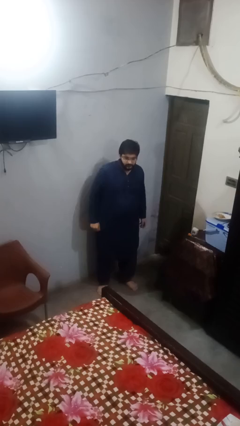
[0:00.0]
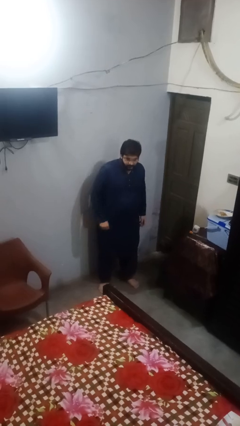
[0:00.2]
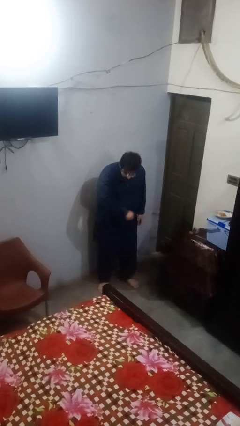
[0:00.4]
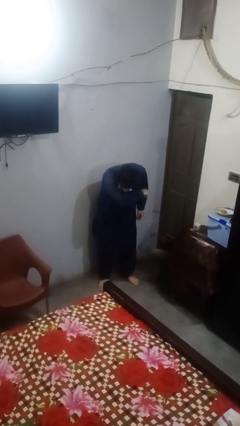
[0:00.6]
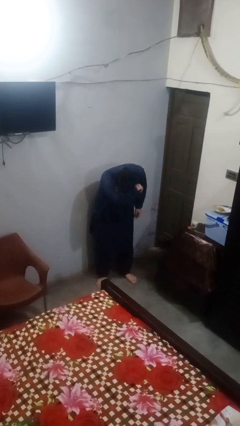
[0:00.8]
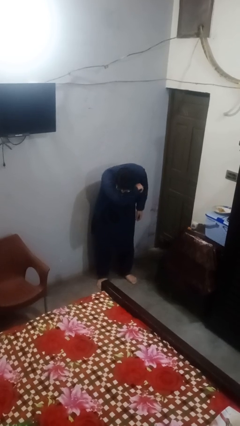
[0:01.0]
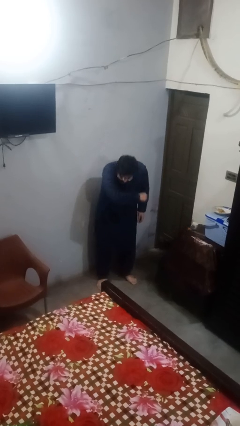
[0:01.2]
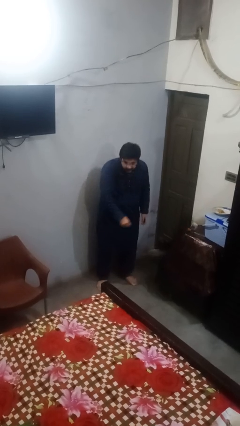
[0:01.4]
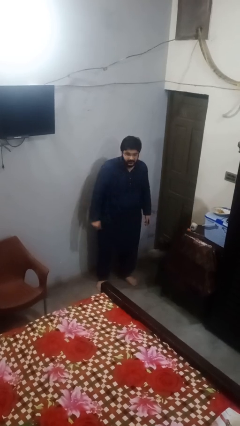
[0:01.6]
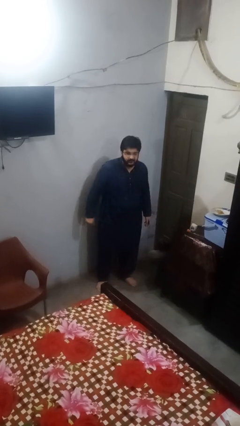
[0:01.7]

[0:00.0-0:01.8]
person sneezes into arm

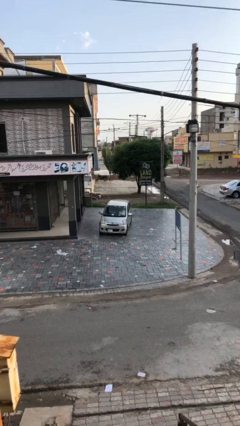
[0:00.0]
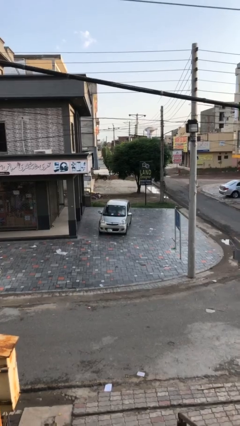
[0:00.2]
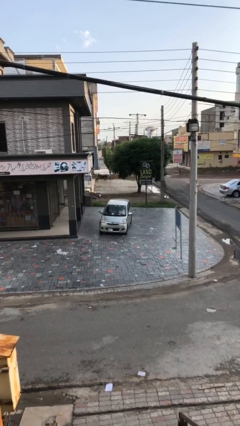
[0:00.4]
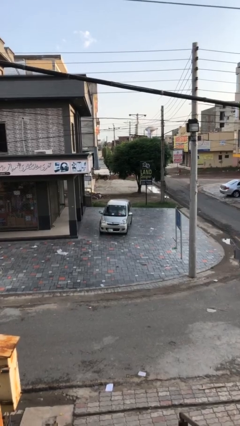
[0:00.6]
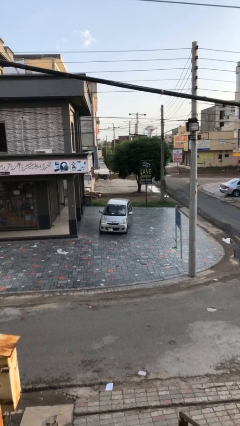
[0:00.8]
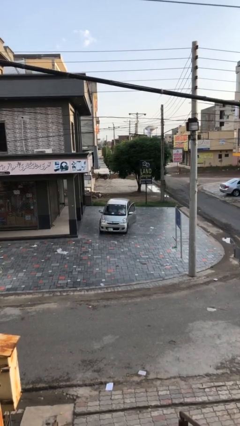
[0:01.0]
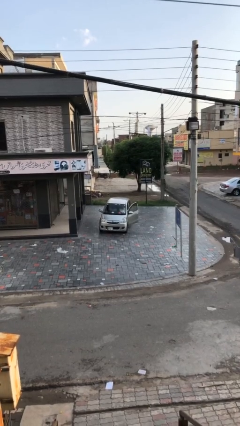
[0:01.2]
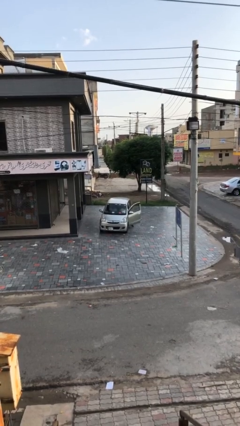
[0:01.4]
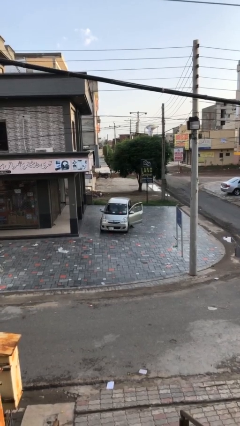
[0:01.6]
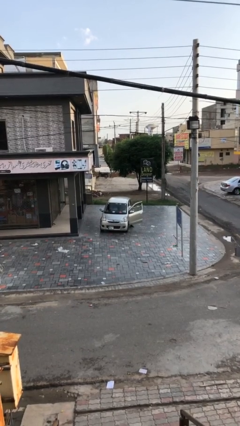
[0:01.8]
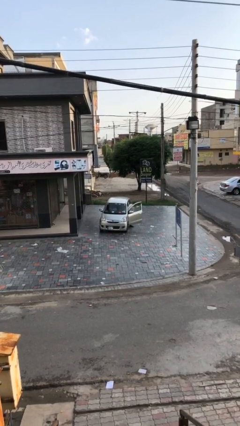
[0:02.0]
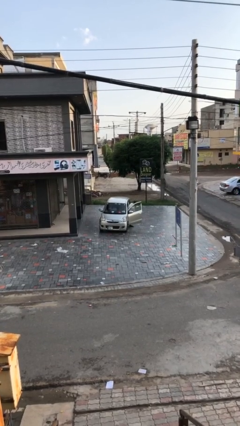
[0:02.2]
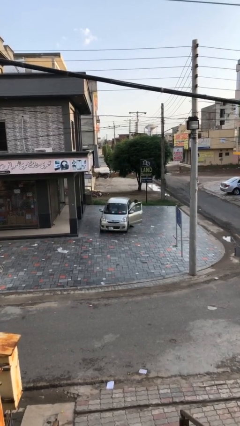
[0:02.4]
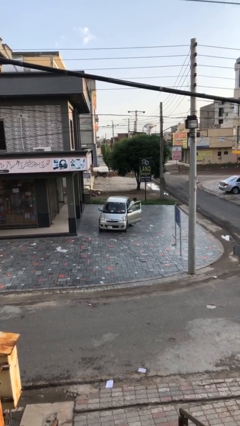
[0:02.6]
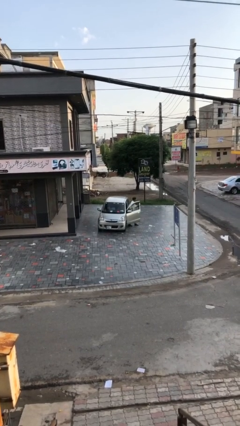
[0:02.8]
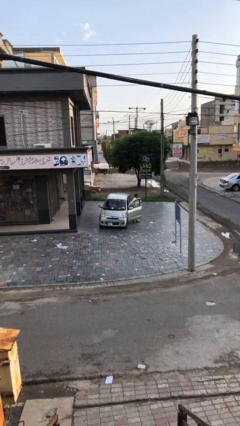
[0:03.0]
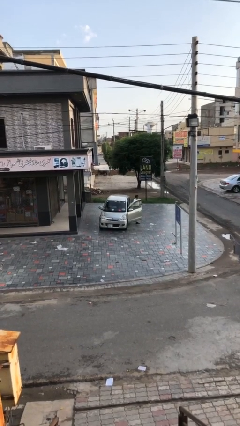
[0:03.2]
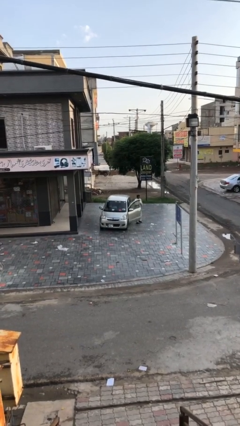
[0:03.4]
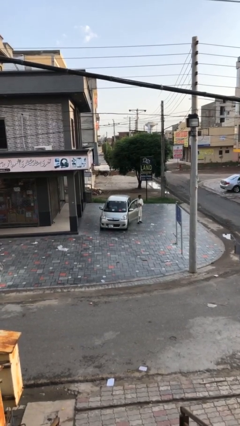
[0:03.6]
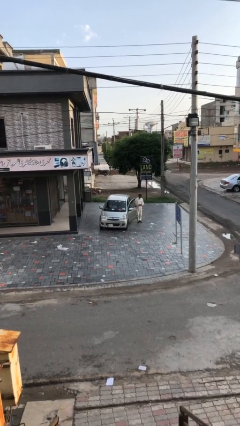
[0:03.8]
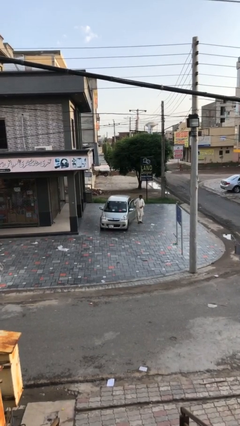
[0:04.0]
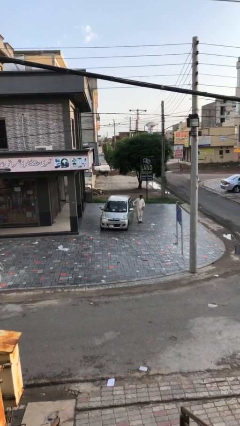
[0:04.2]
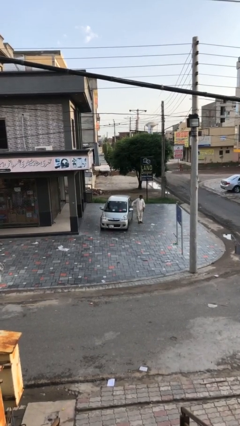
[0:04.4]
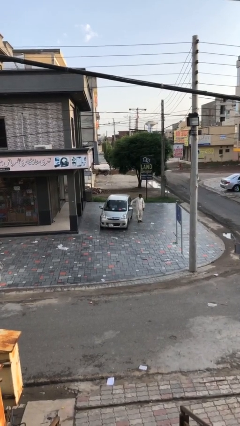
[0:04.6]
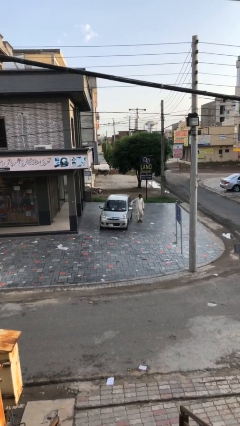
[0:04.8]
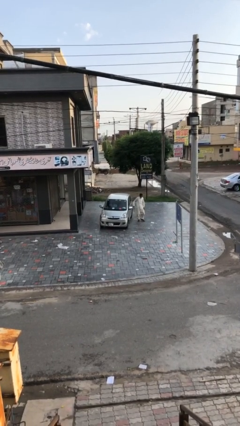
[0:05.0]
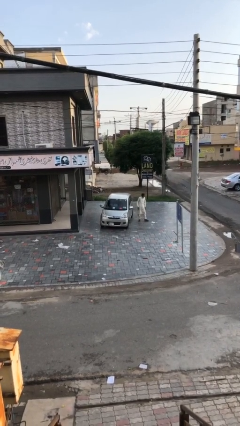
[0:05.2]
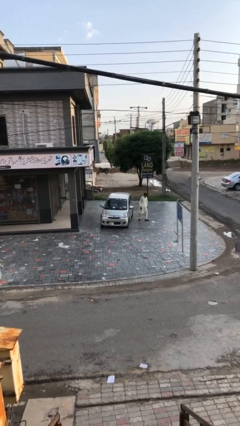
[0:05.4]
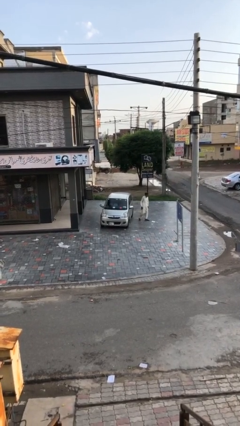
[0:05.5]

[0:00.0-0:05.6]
car drops off person

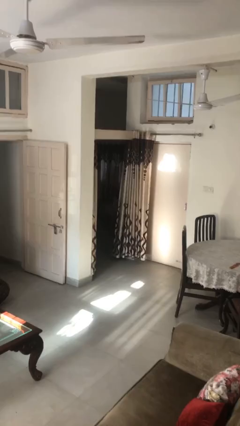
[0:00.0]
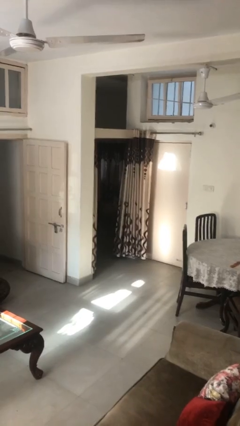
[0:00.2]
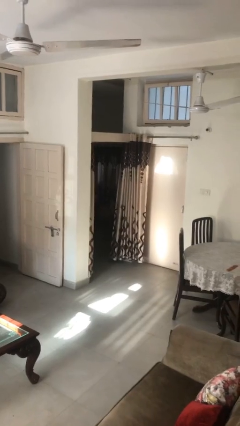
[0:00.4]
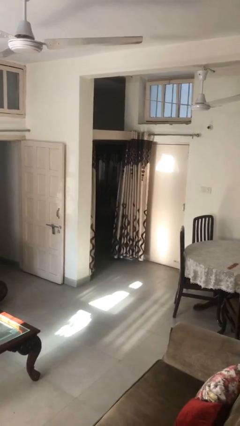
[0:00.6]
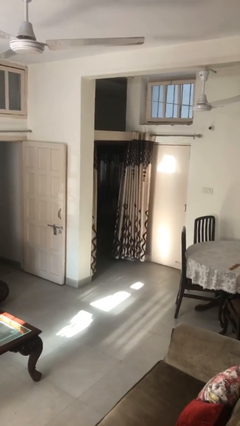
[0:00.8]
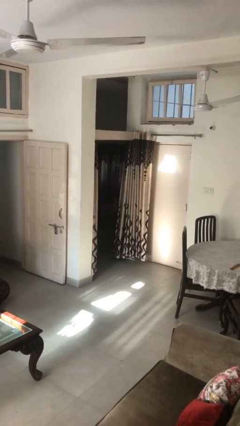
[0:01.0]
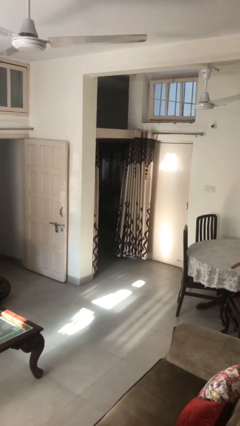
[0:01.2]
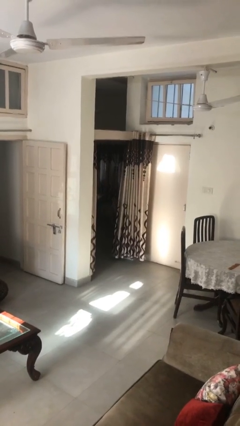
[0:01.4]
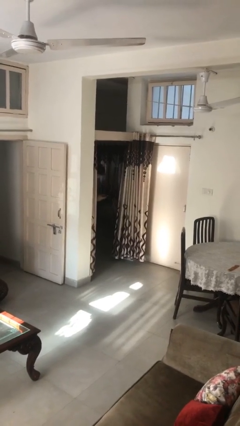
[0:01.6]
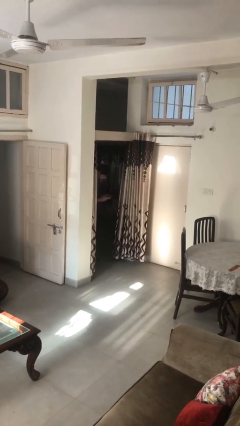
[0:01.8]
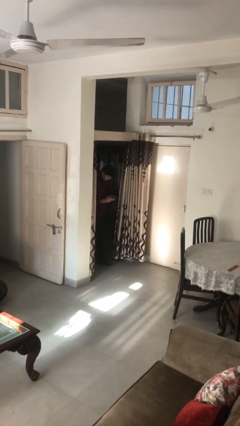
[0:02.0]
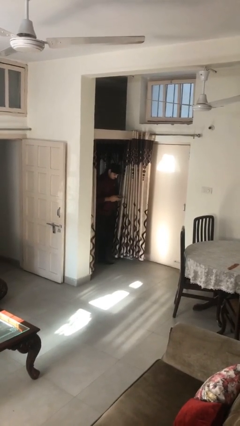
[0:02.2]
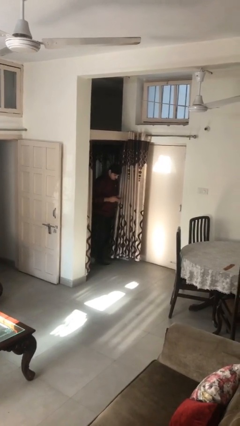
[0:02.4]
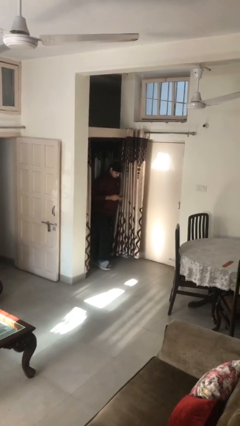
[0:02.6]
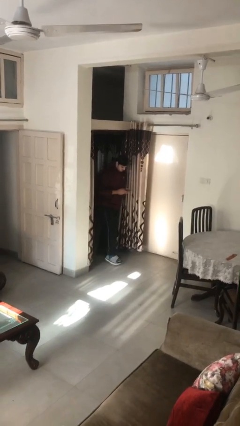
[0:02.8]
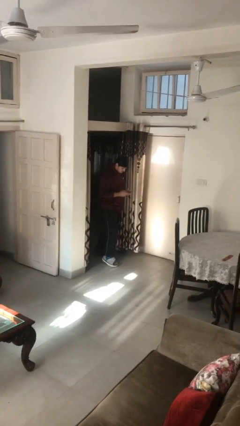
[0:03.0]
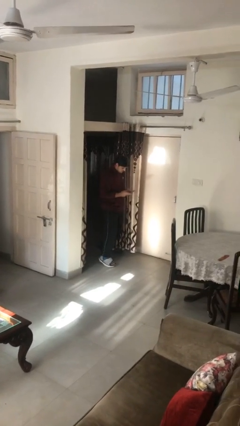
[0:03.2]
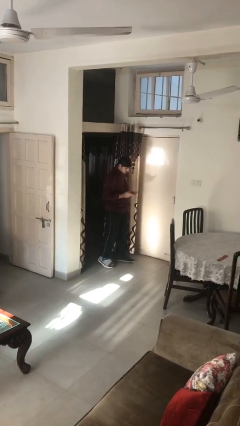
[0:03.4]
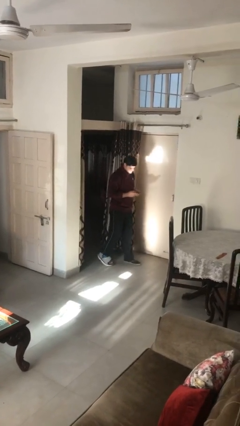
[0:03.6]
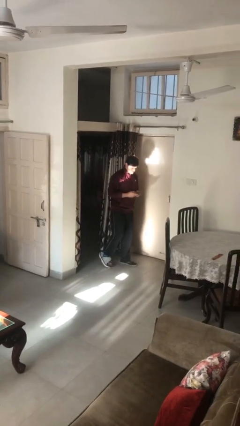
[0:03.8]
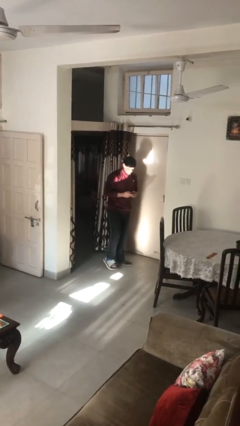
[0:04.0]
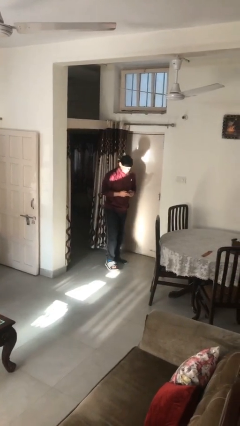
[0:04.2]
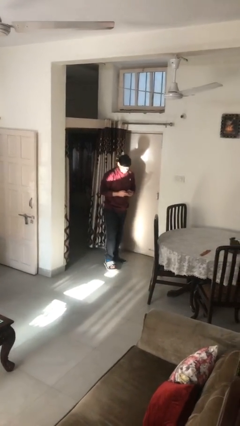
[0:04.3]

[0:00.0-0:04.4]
person enters scene through structure

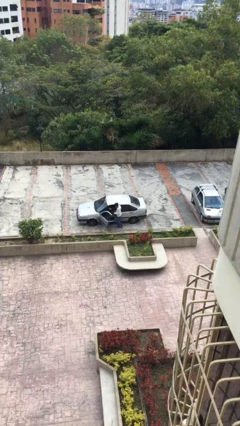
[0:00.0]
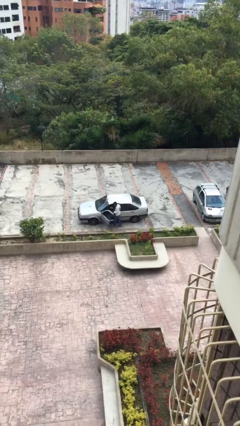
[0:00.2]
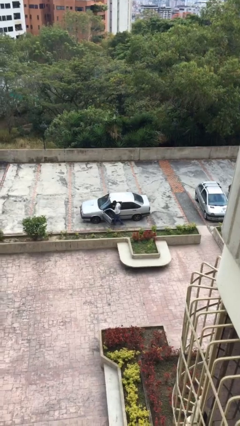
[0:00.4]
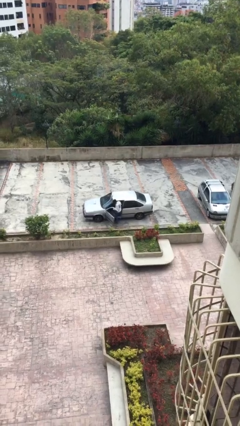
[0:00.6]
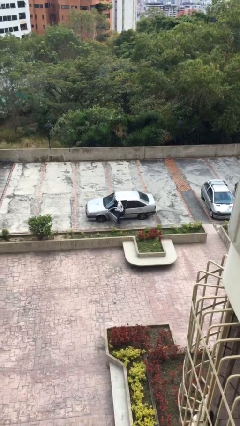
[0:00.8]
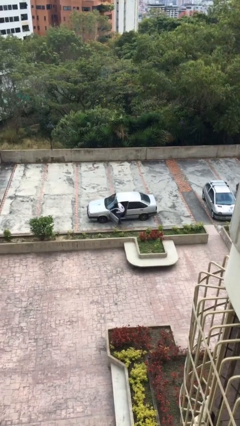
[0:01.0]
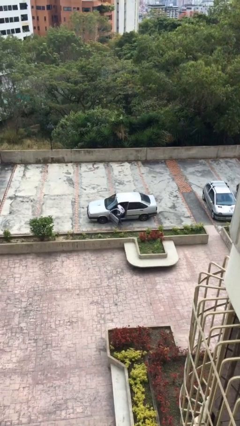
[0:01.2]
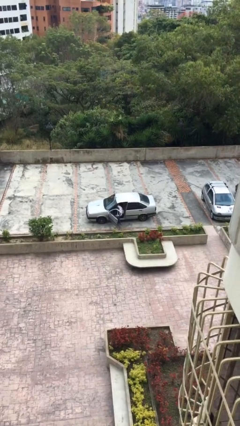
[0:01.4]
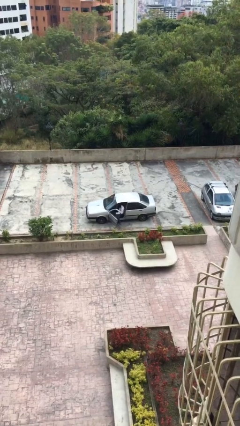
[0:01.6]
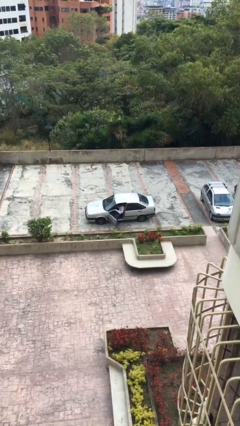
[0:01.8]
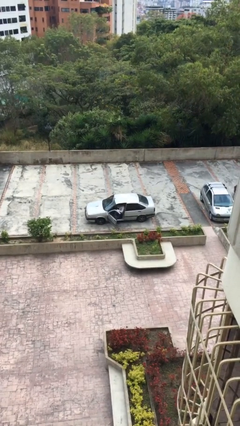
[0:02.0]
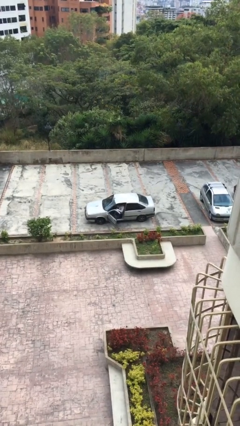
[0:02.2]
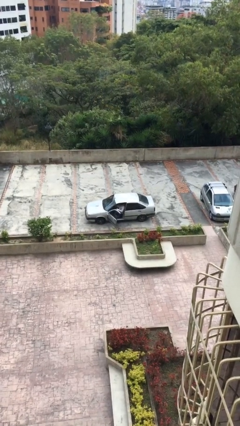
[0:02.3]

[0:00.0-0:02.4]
person enters car

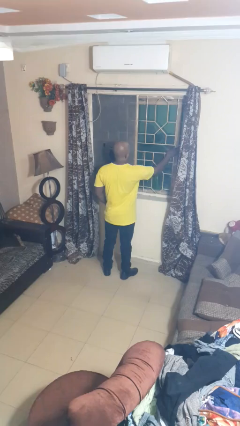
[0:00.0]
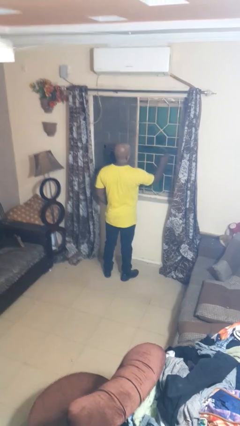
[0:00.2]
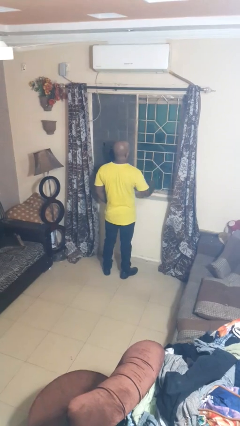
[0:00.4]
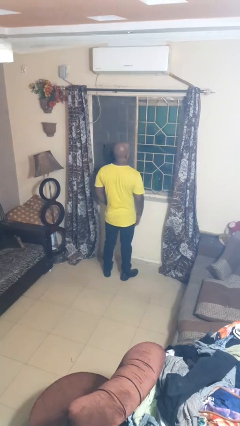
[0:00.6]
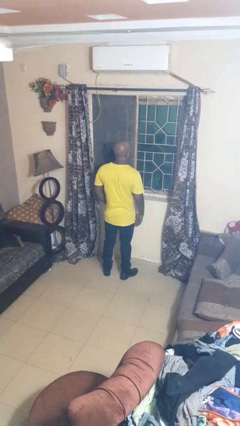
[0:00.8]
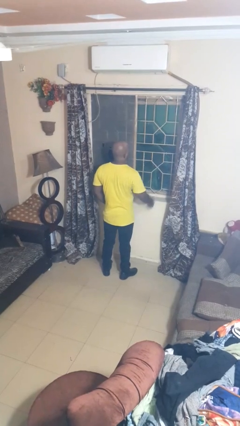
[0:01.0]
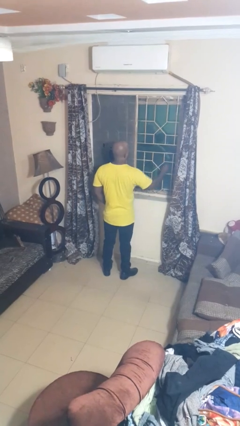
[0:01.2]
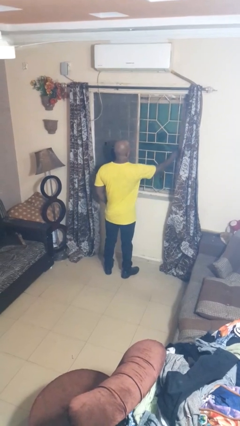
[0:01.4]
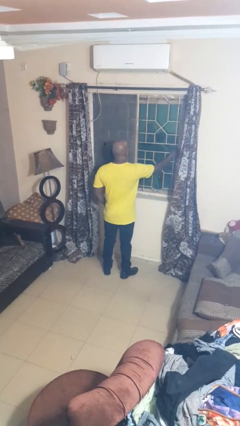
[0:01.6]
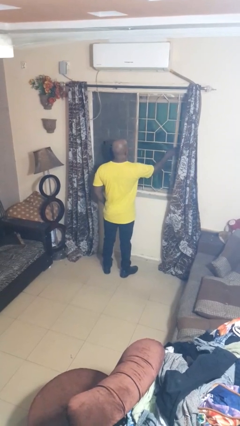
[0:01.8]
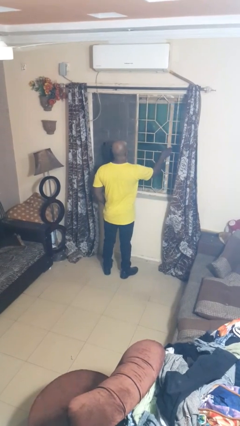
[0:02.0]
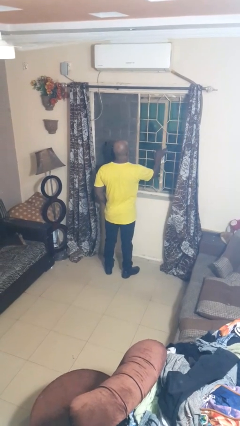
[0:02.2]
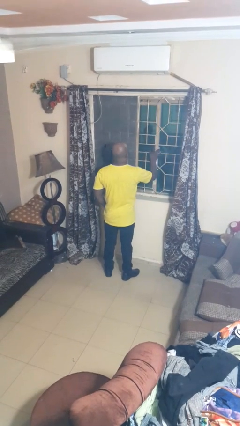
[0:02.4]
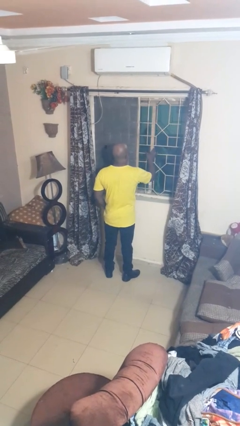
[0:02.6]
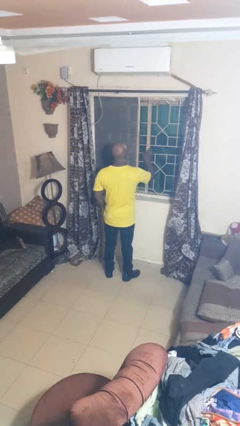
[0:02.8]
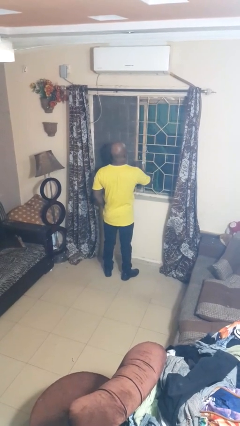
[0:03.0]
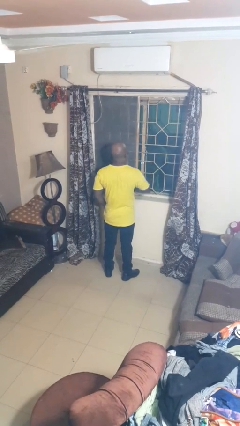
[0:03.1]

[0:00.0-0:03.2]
person closes home window
